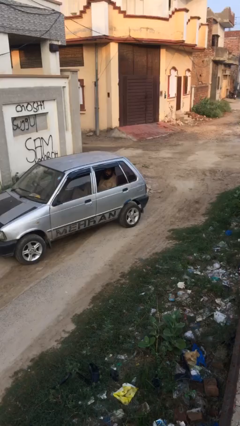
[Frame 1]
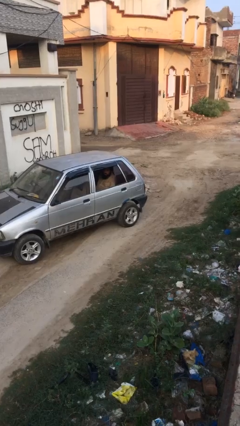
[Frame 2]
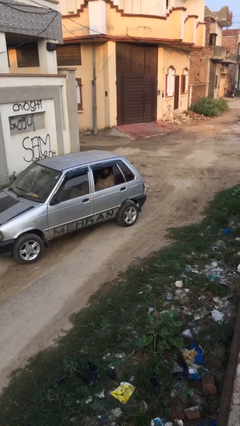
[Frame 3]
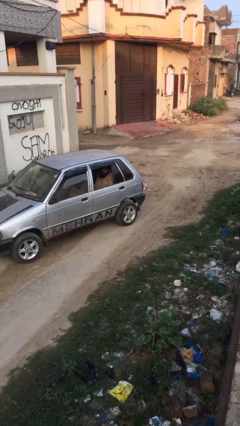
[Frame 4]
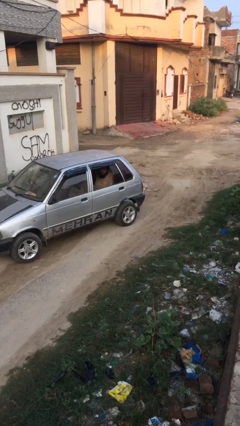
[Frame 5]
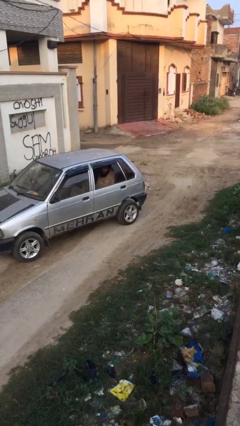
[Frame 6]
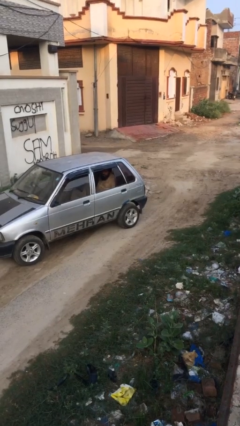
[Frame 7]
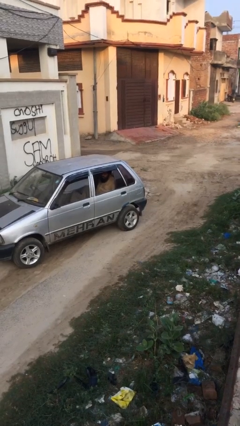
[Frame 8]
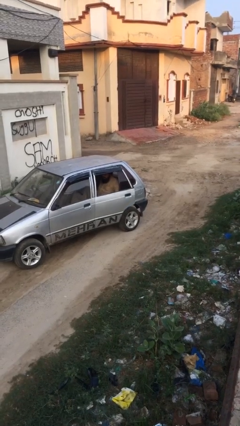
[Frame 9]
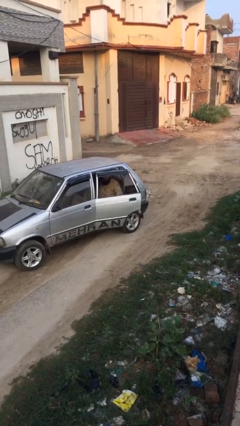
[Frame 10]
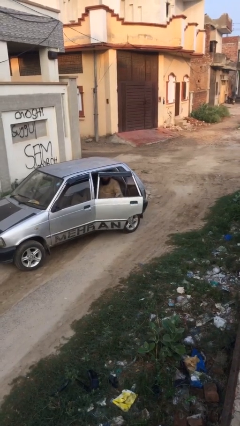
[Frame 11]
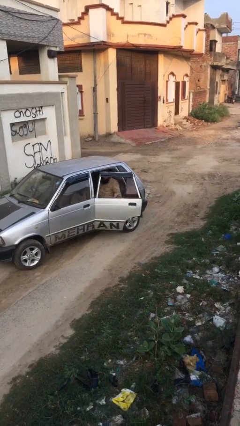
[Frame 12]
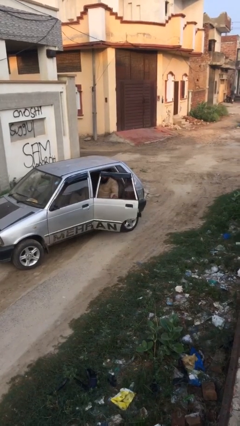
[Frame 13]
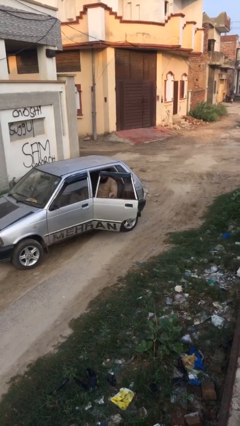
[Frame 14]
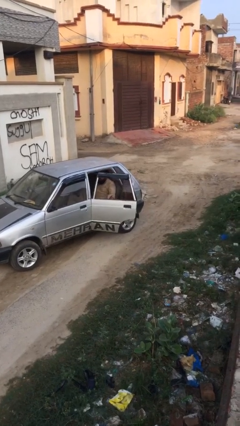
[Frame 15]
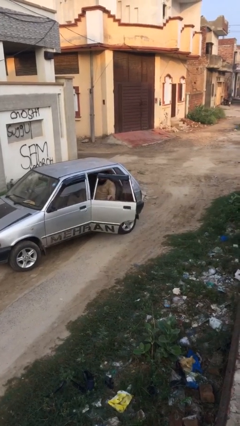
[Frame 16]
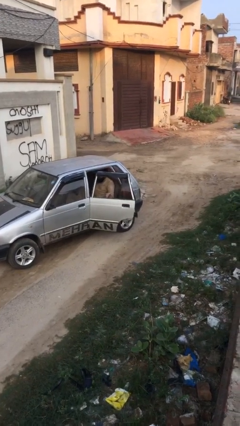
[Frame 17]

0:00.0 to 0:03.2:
person opens car door

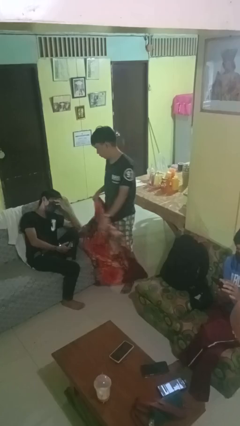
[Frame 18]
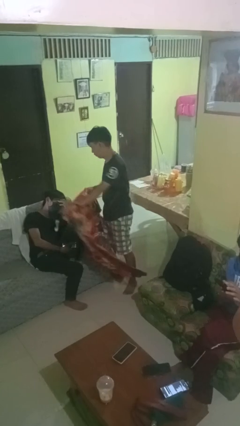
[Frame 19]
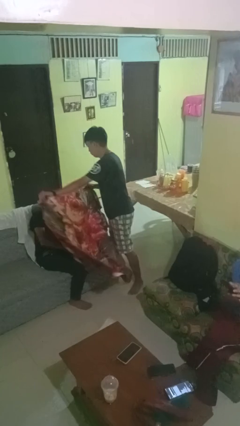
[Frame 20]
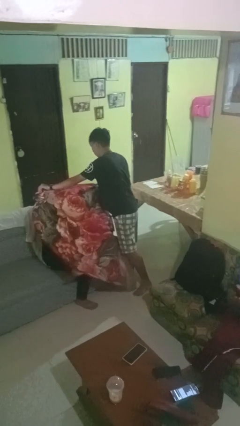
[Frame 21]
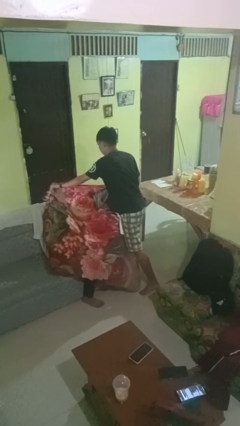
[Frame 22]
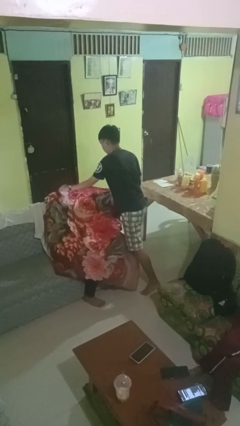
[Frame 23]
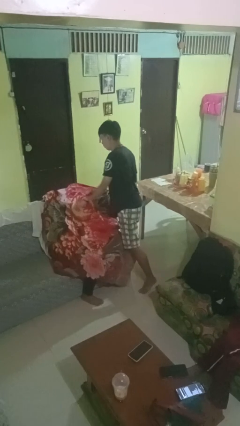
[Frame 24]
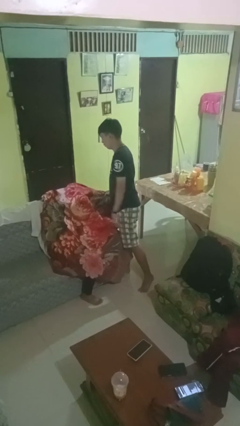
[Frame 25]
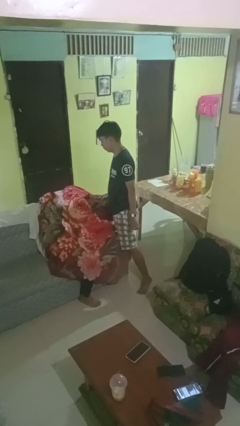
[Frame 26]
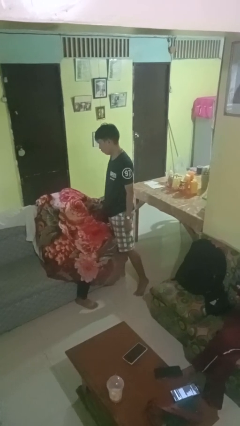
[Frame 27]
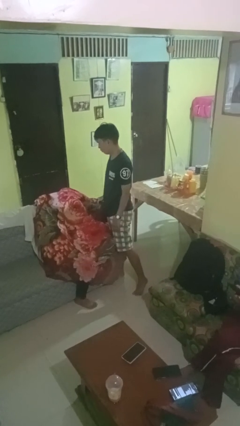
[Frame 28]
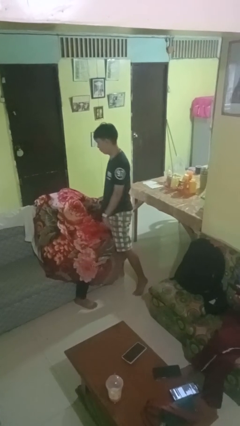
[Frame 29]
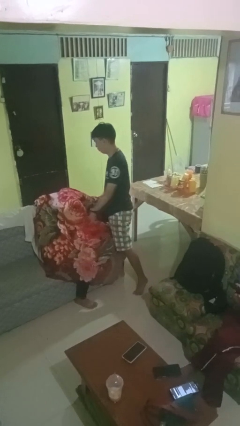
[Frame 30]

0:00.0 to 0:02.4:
person covers friend with blanket

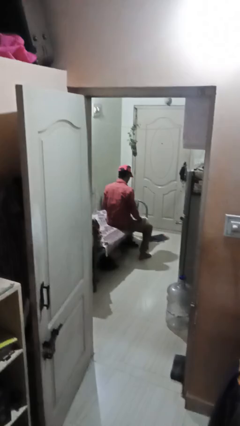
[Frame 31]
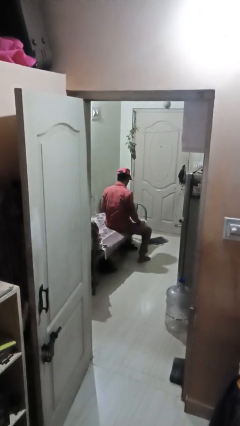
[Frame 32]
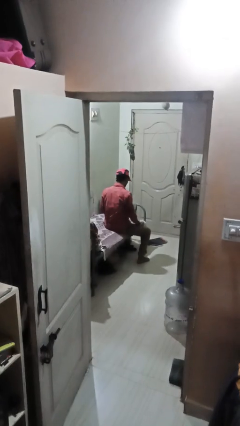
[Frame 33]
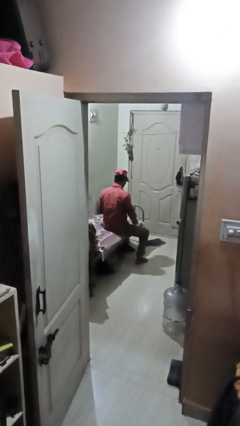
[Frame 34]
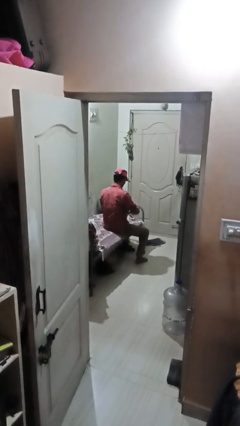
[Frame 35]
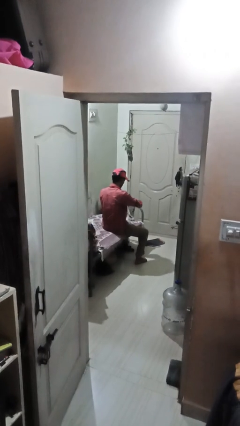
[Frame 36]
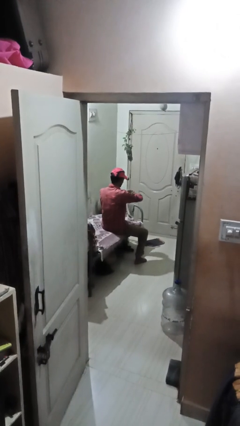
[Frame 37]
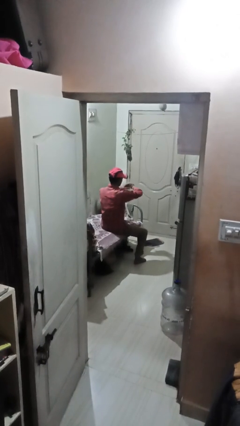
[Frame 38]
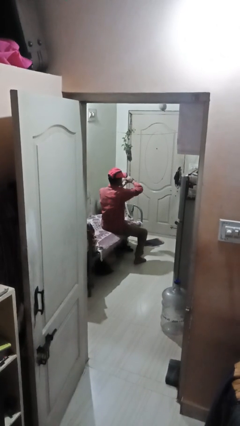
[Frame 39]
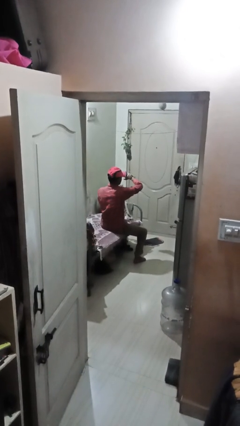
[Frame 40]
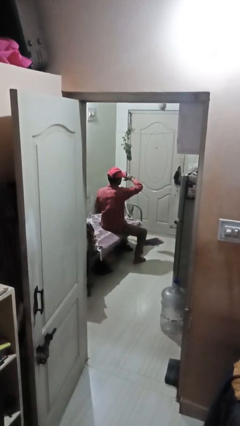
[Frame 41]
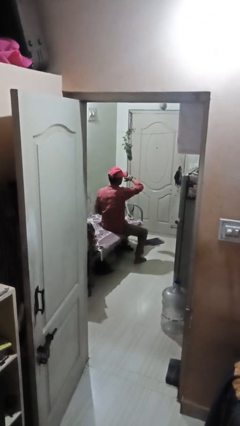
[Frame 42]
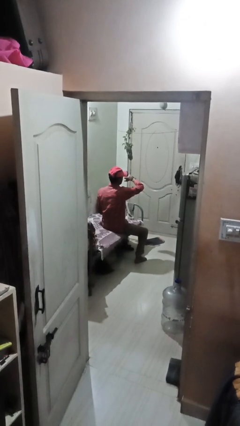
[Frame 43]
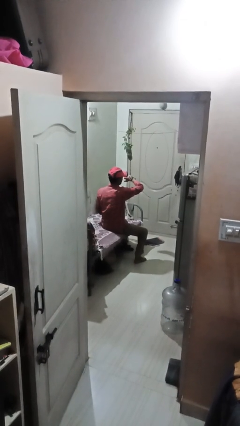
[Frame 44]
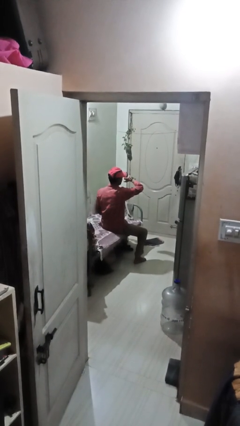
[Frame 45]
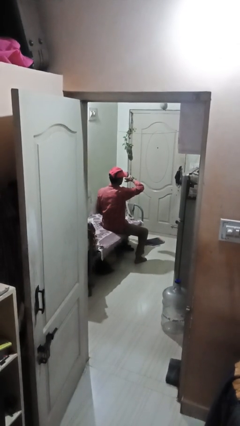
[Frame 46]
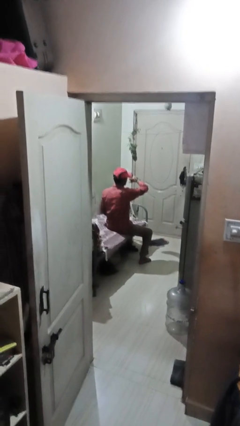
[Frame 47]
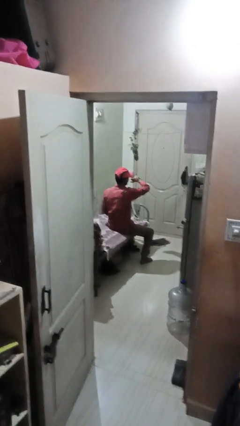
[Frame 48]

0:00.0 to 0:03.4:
person looks at wristwatch

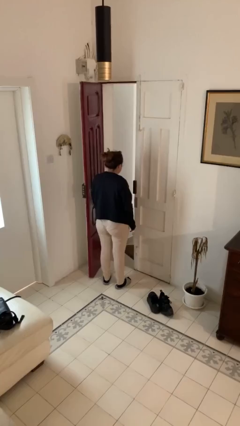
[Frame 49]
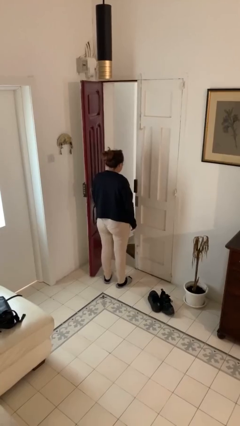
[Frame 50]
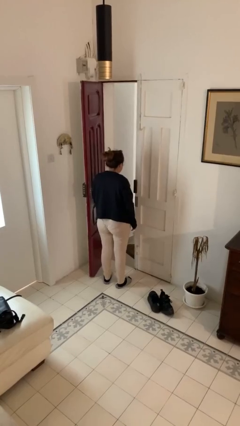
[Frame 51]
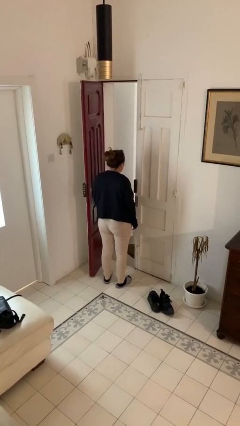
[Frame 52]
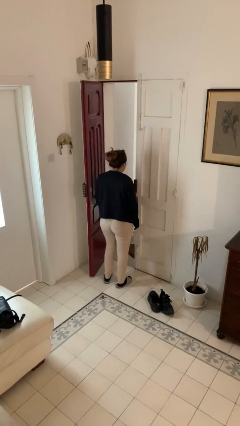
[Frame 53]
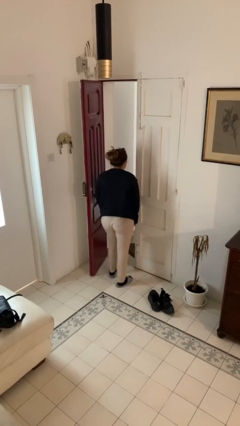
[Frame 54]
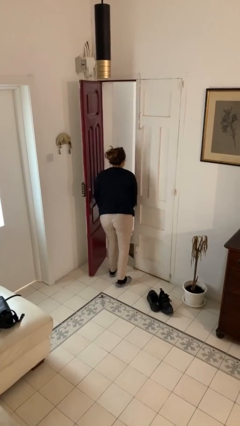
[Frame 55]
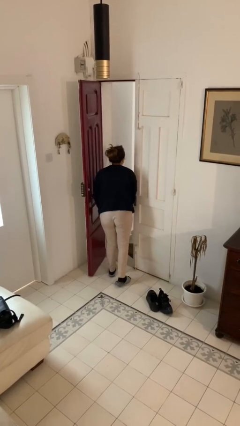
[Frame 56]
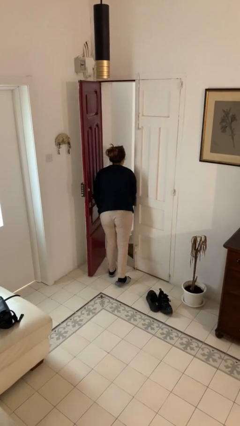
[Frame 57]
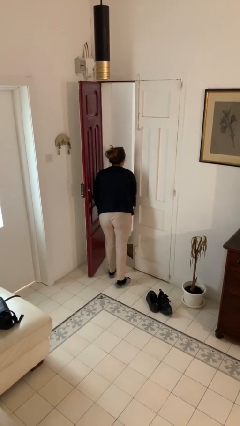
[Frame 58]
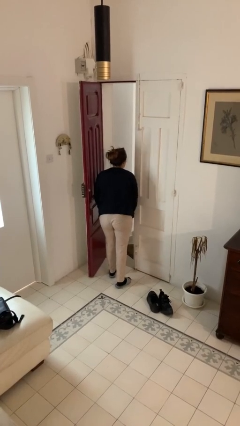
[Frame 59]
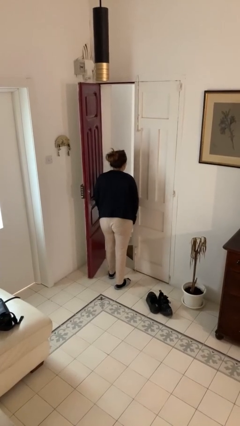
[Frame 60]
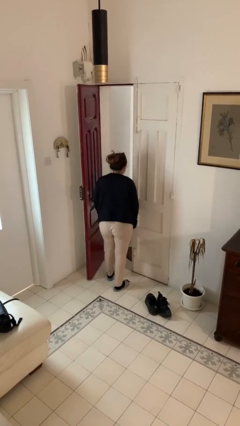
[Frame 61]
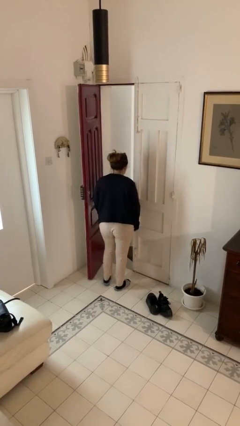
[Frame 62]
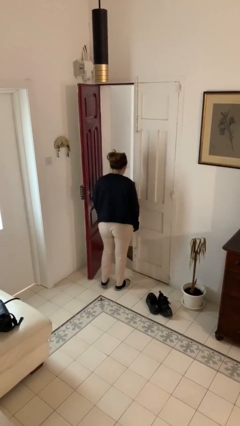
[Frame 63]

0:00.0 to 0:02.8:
person bumps into wall

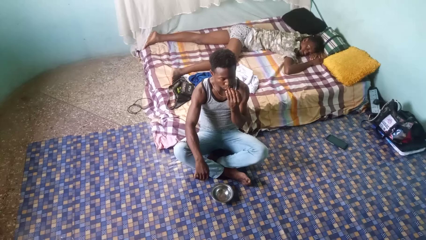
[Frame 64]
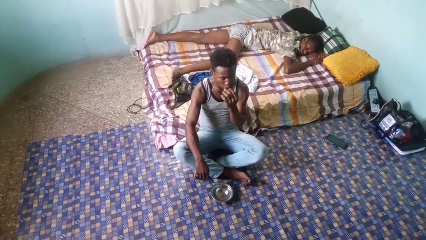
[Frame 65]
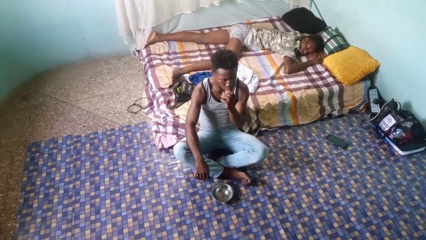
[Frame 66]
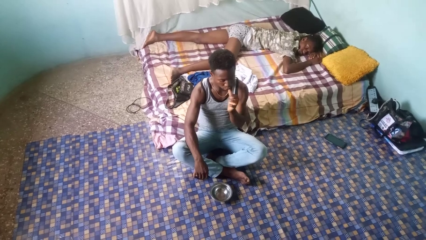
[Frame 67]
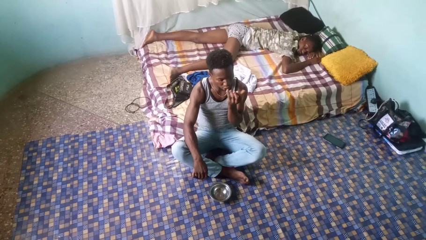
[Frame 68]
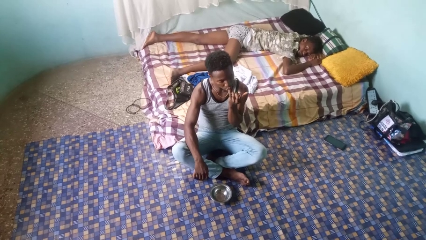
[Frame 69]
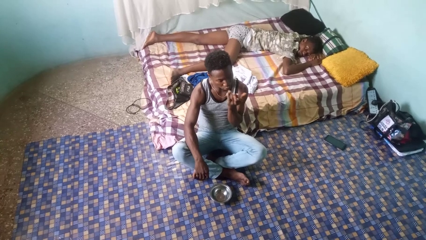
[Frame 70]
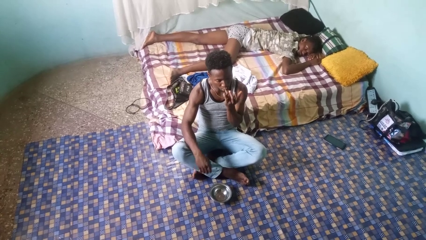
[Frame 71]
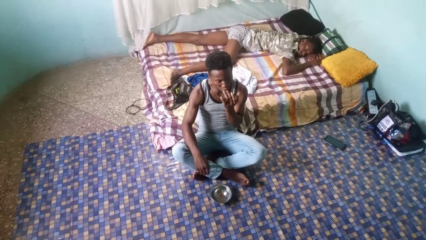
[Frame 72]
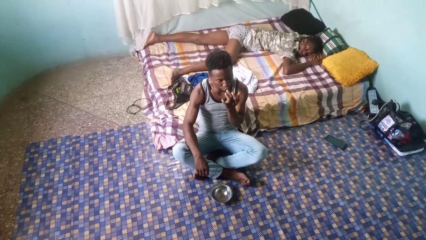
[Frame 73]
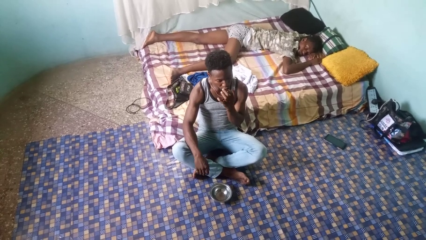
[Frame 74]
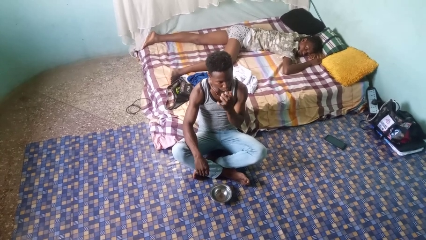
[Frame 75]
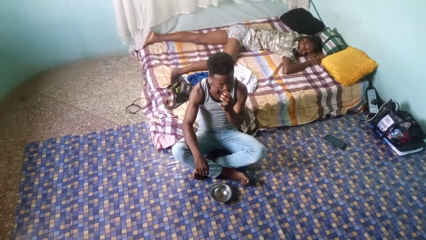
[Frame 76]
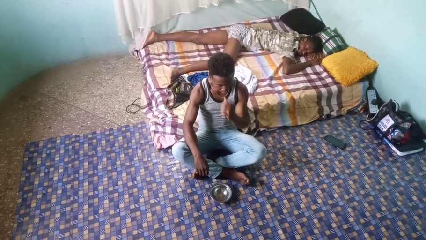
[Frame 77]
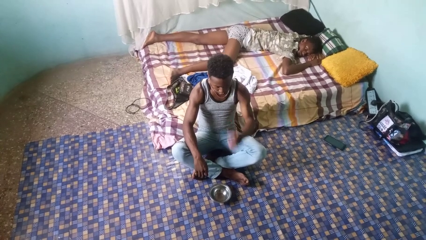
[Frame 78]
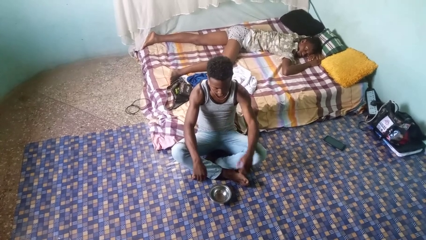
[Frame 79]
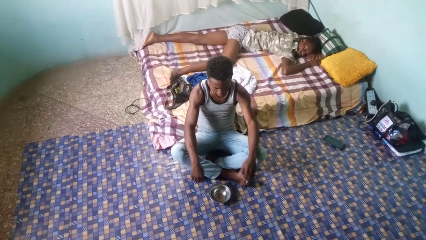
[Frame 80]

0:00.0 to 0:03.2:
person licks fingers

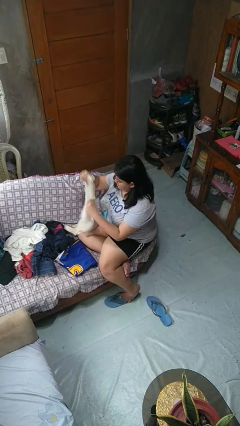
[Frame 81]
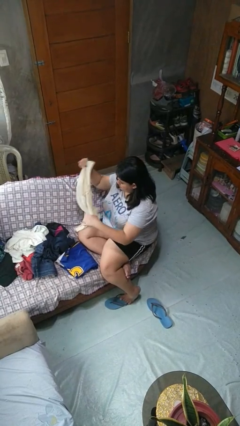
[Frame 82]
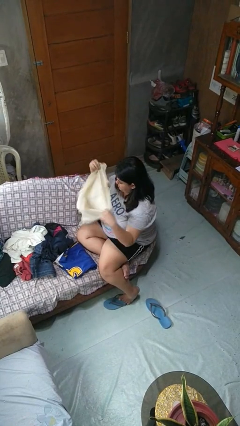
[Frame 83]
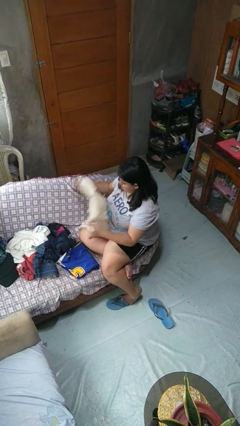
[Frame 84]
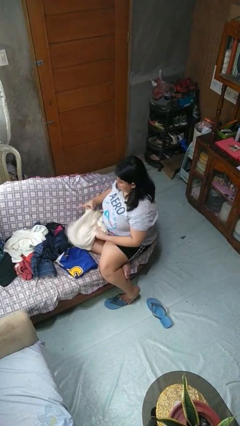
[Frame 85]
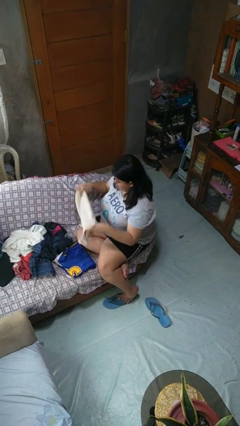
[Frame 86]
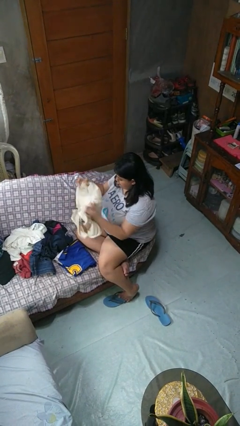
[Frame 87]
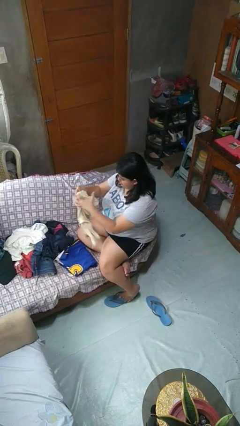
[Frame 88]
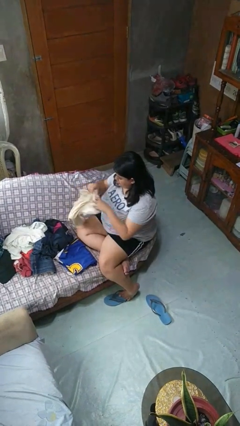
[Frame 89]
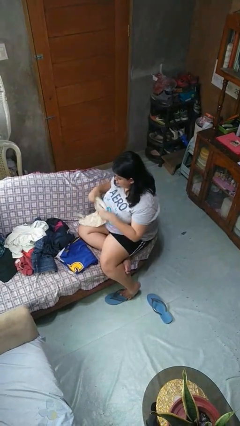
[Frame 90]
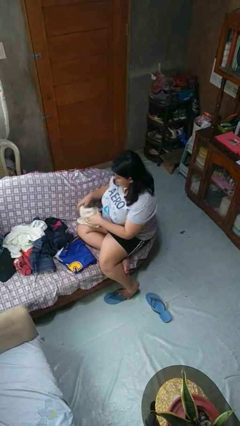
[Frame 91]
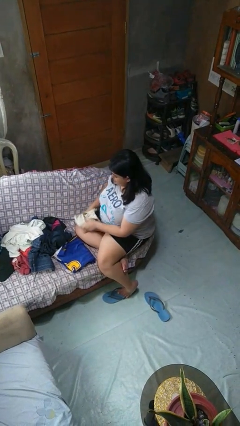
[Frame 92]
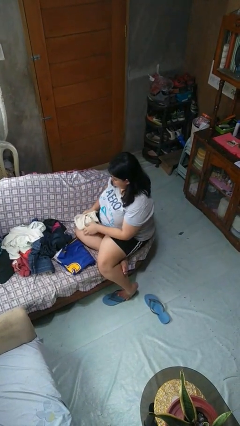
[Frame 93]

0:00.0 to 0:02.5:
person folds shirt
